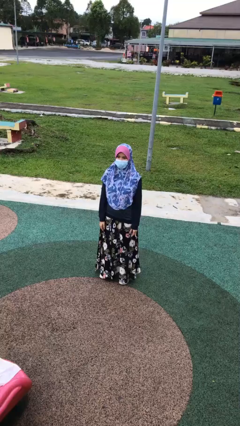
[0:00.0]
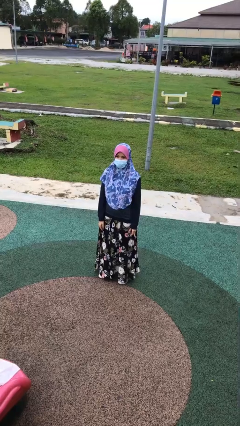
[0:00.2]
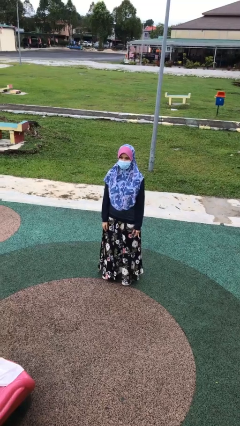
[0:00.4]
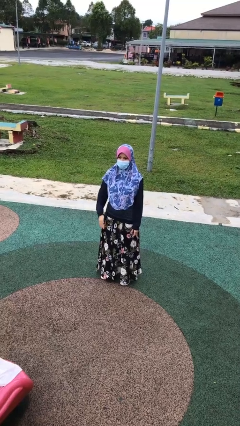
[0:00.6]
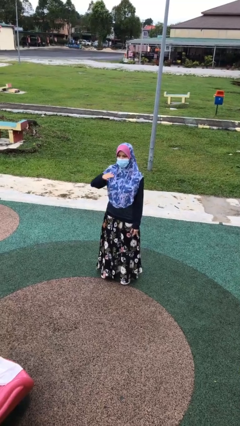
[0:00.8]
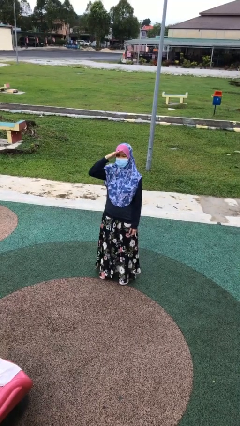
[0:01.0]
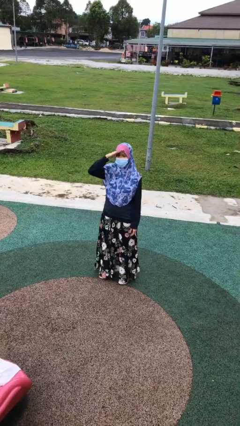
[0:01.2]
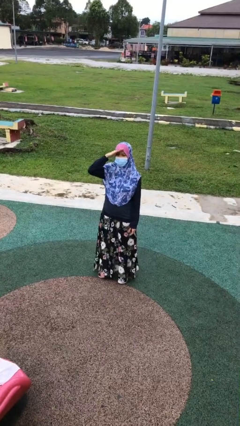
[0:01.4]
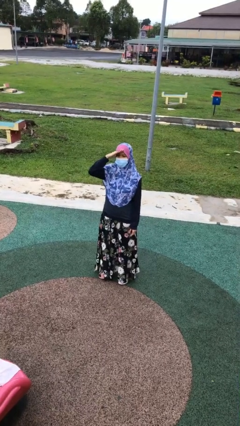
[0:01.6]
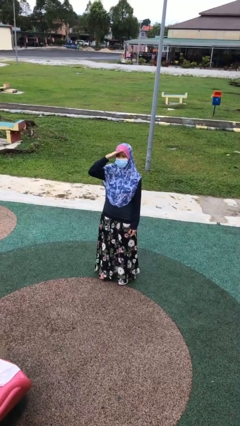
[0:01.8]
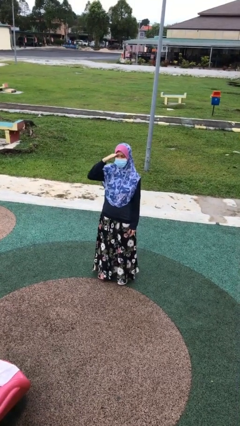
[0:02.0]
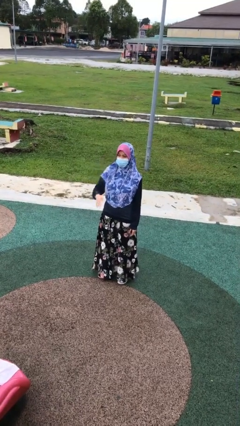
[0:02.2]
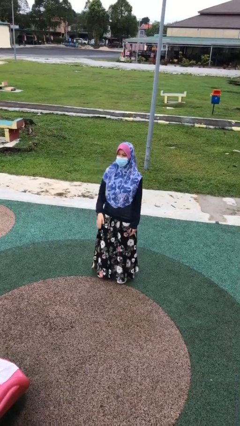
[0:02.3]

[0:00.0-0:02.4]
person salutes

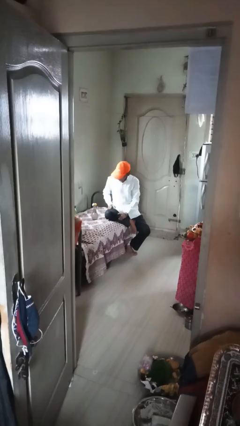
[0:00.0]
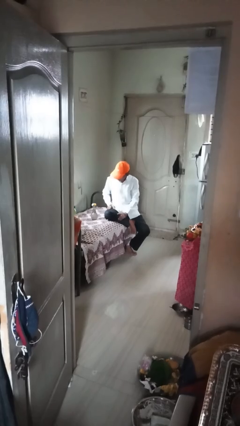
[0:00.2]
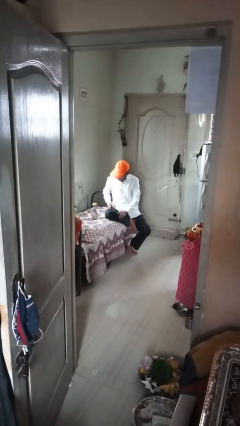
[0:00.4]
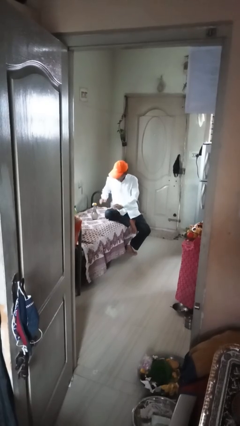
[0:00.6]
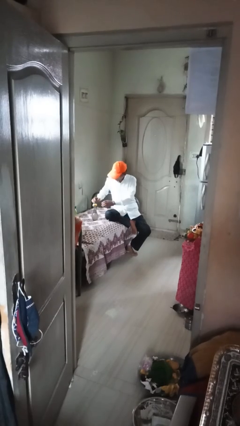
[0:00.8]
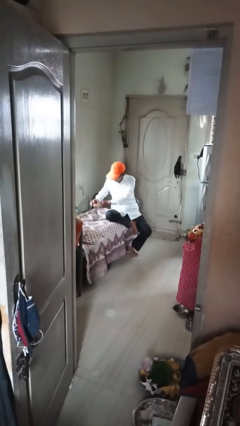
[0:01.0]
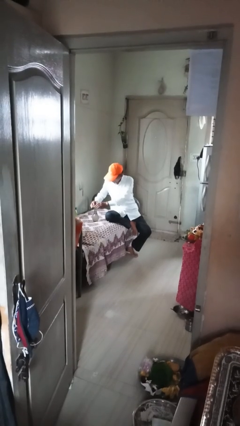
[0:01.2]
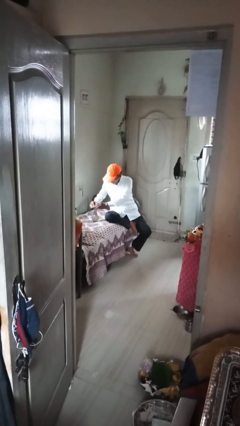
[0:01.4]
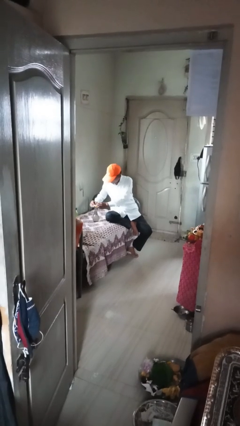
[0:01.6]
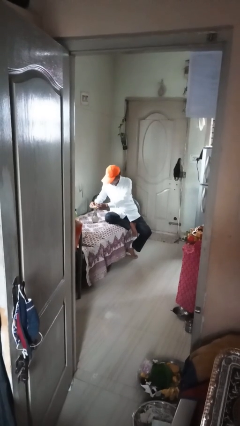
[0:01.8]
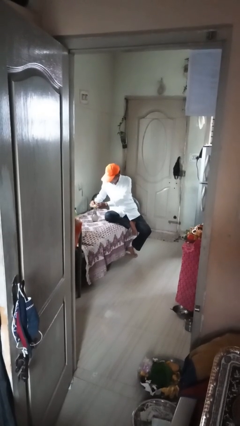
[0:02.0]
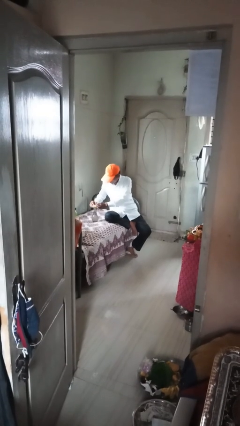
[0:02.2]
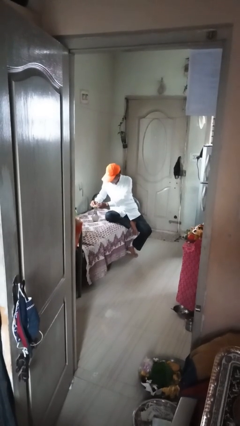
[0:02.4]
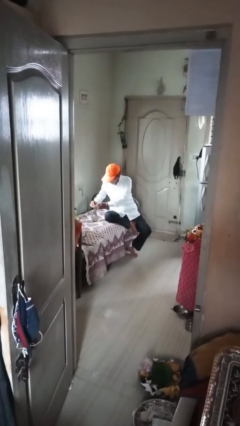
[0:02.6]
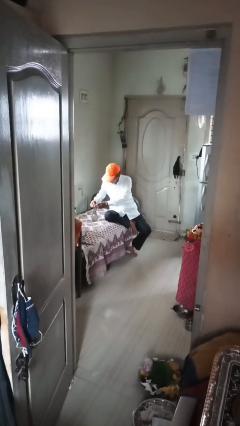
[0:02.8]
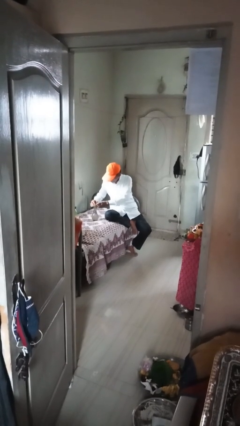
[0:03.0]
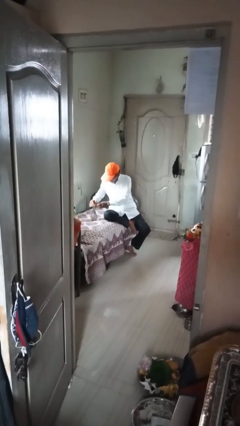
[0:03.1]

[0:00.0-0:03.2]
person arranges flowers in vase

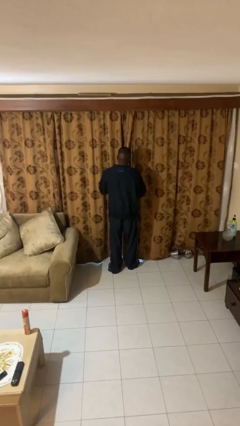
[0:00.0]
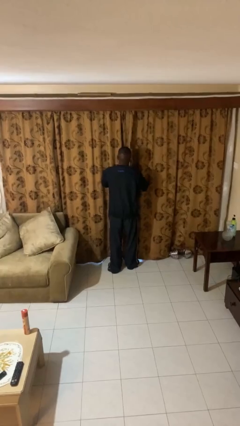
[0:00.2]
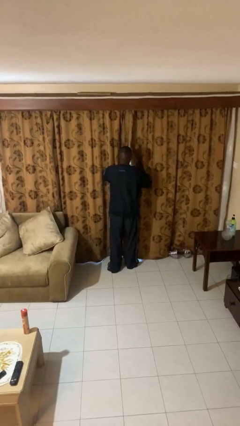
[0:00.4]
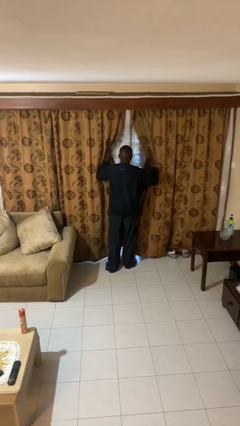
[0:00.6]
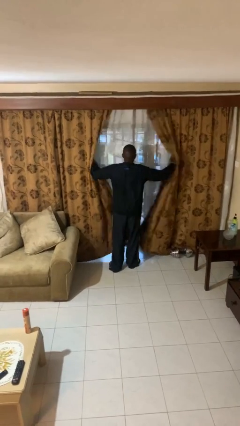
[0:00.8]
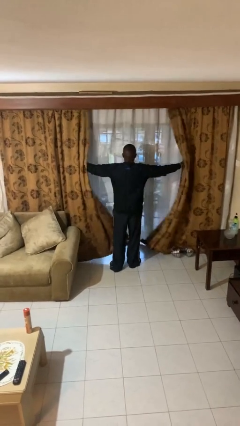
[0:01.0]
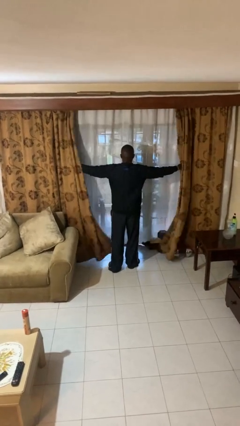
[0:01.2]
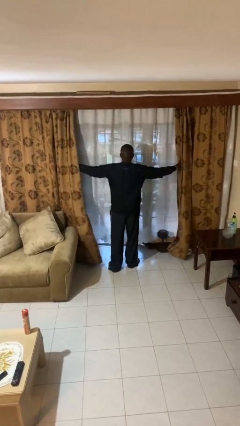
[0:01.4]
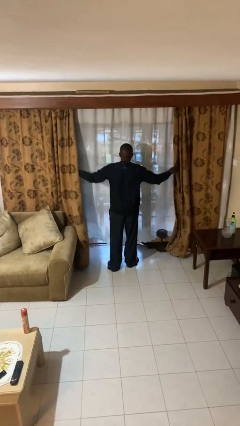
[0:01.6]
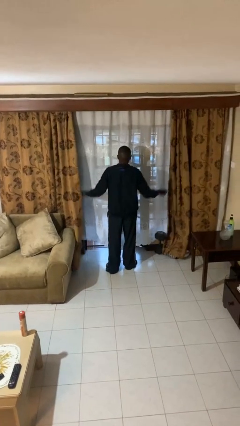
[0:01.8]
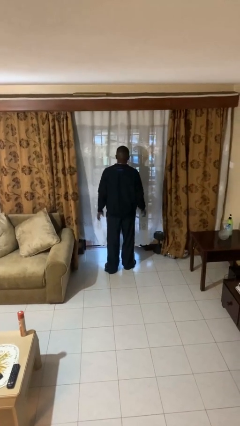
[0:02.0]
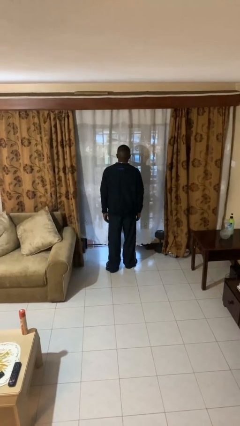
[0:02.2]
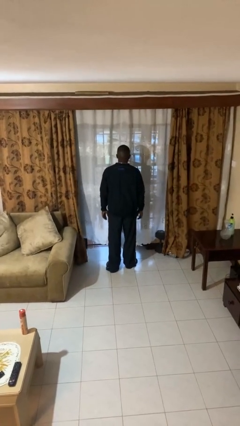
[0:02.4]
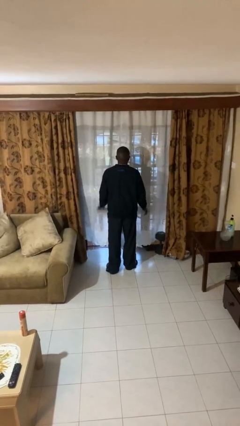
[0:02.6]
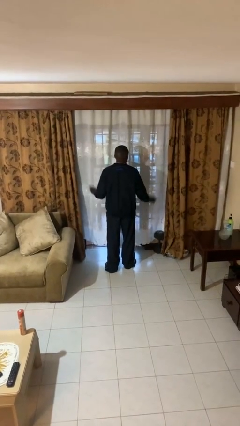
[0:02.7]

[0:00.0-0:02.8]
person opens curtains

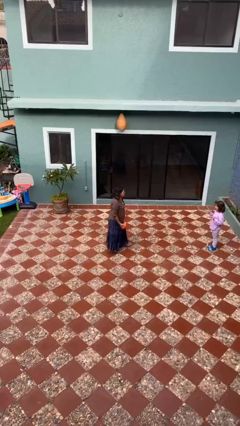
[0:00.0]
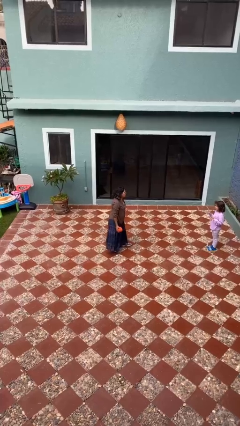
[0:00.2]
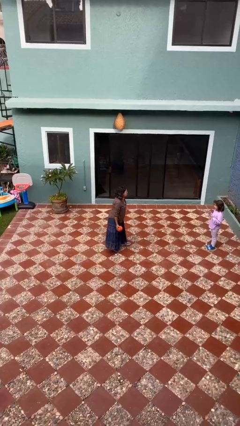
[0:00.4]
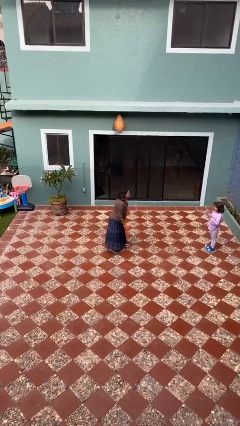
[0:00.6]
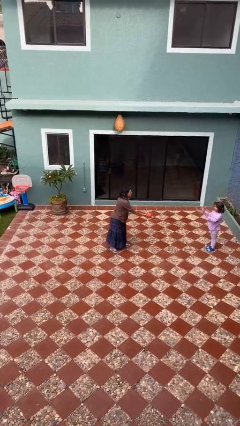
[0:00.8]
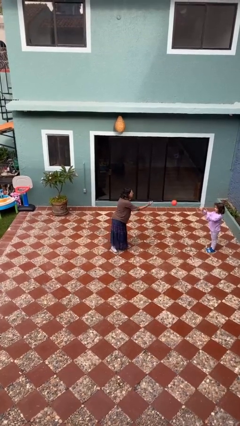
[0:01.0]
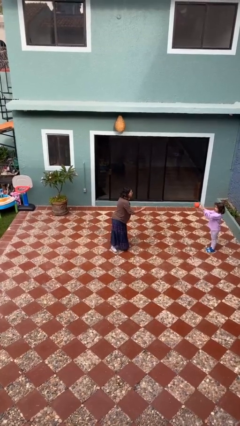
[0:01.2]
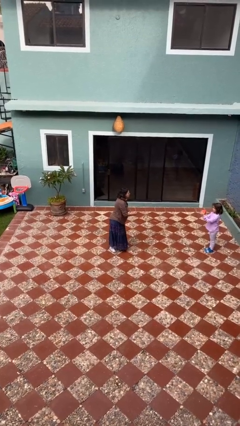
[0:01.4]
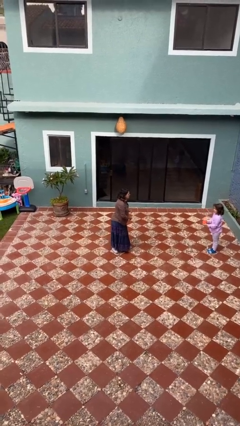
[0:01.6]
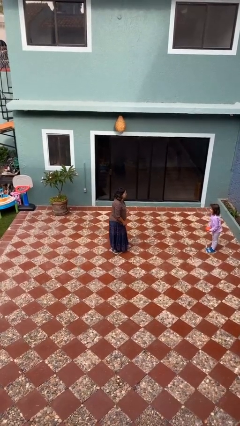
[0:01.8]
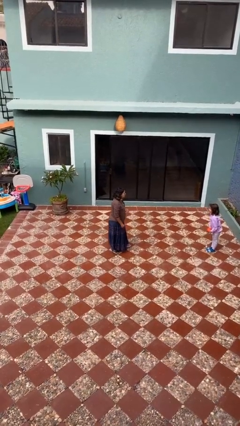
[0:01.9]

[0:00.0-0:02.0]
person throws object to person

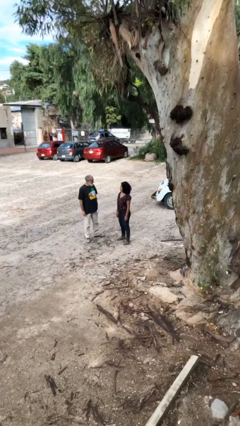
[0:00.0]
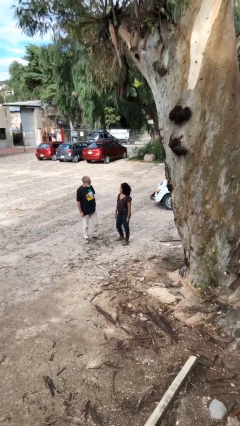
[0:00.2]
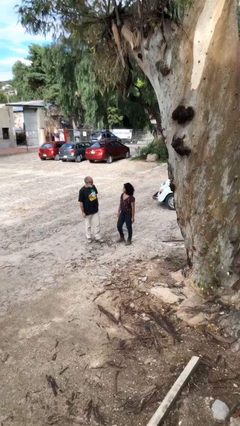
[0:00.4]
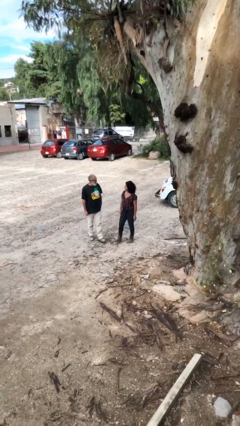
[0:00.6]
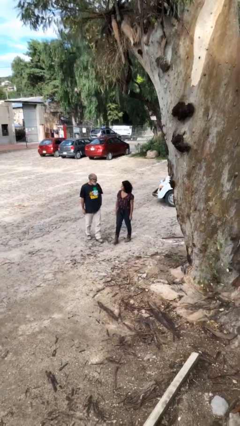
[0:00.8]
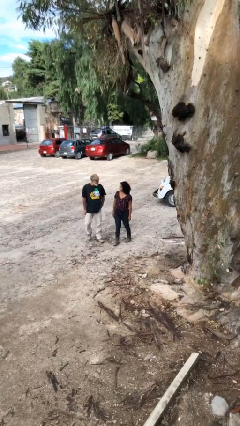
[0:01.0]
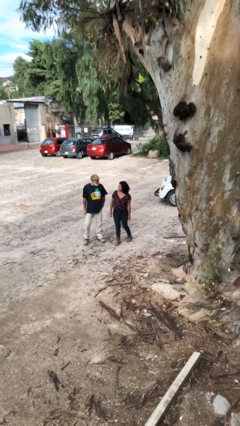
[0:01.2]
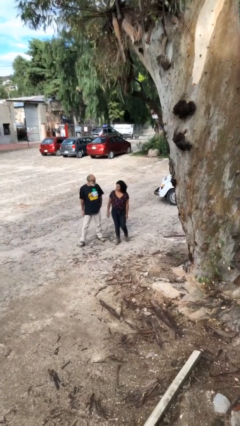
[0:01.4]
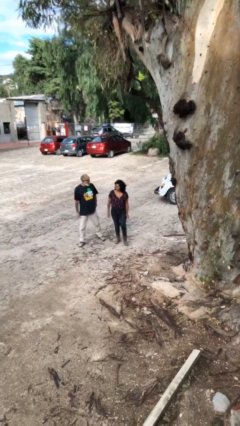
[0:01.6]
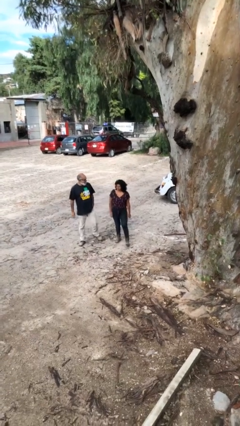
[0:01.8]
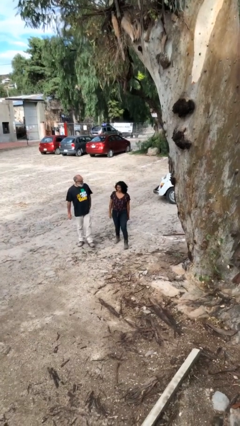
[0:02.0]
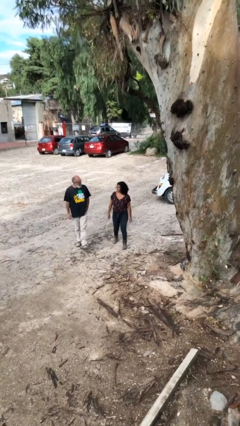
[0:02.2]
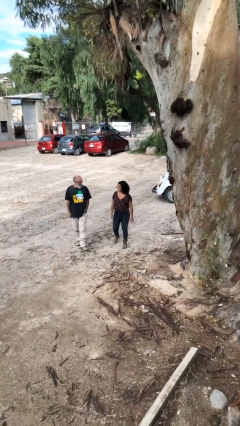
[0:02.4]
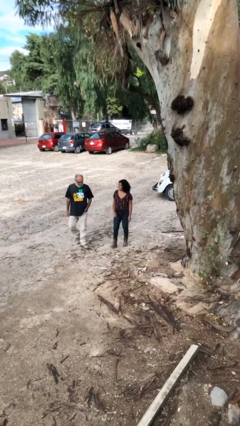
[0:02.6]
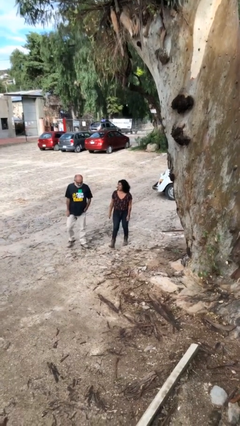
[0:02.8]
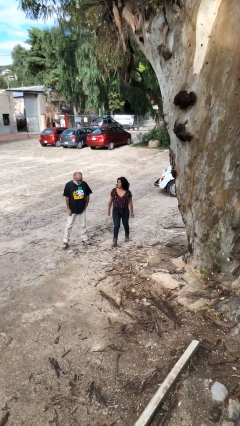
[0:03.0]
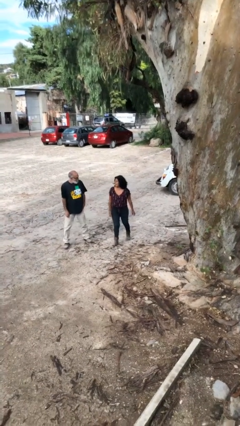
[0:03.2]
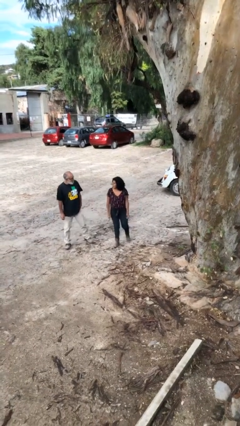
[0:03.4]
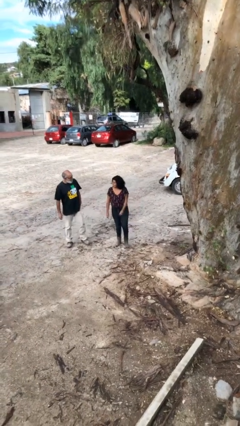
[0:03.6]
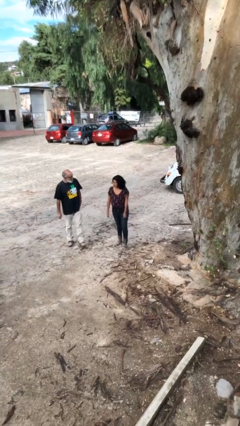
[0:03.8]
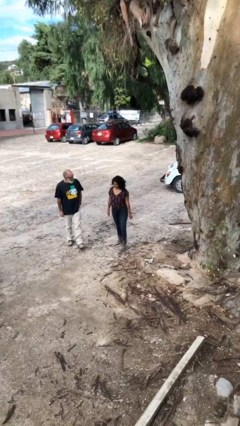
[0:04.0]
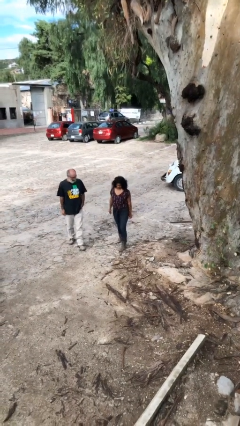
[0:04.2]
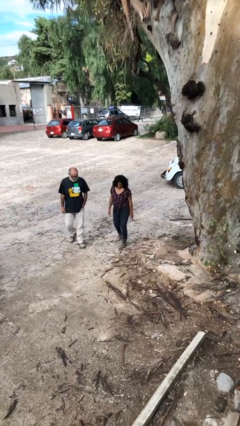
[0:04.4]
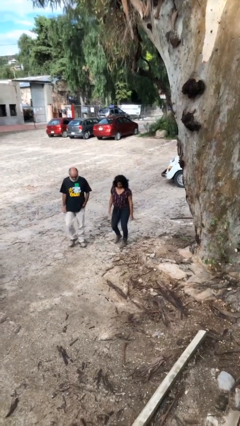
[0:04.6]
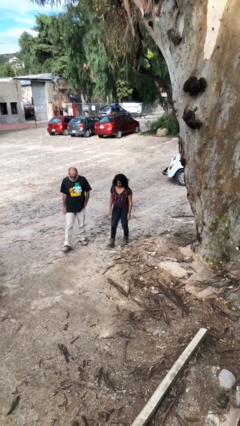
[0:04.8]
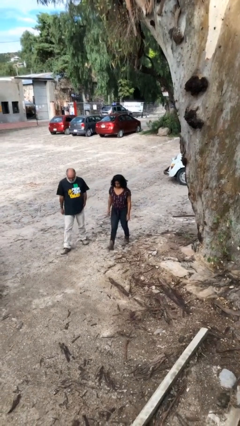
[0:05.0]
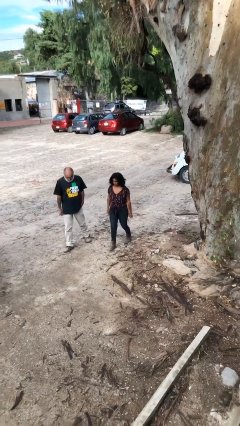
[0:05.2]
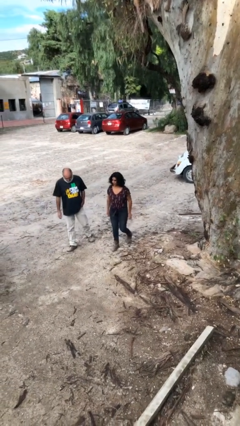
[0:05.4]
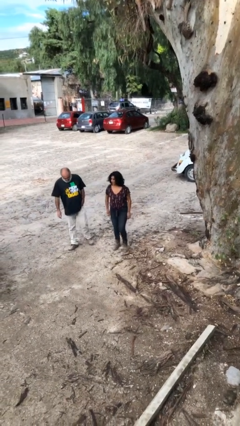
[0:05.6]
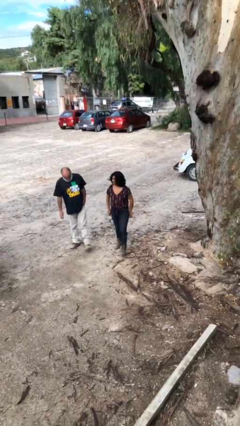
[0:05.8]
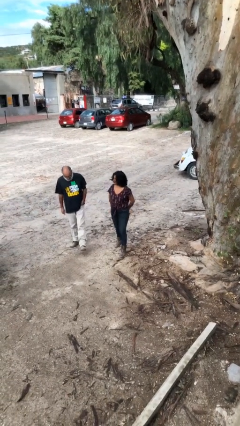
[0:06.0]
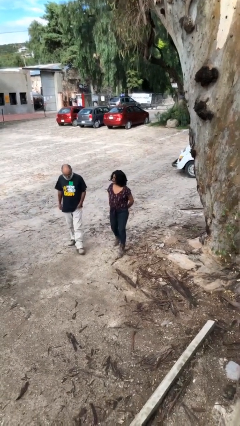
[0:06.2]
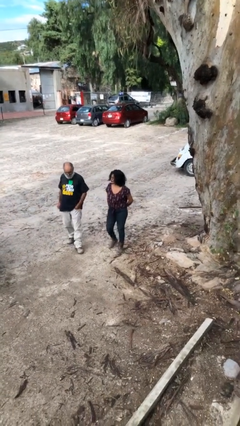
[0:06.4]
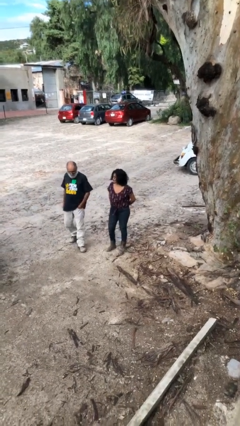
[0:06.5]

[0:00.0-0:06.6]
person talks to person

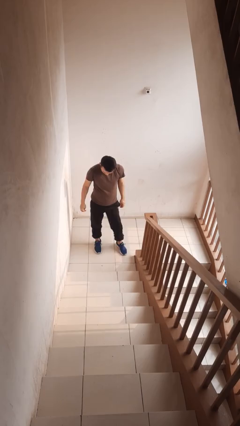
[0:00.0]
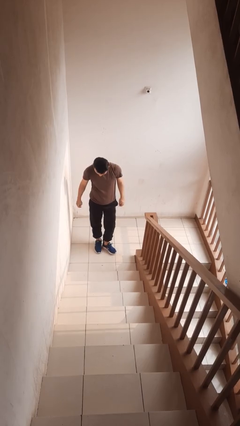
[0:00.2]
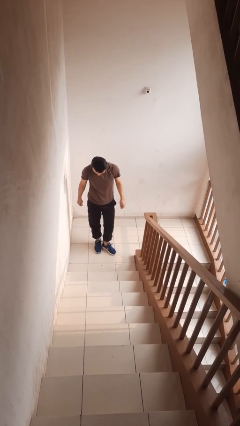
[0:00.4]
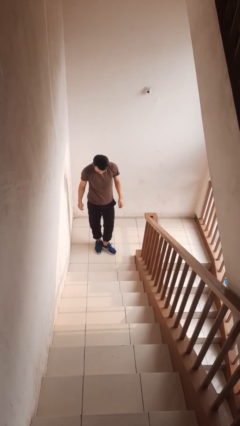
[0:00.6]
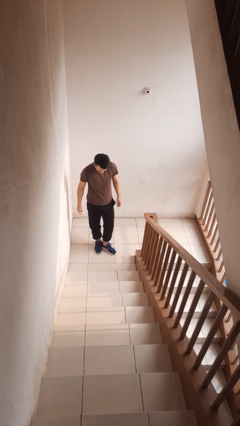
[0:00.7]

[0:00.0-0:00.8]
person takes off shoes
